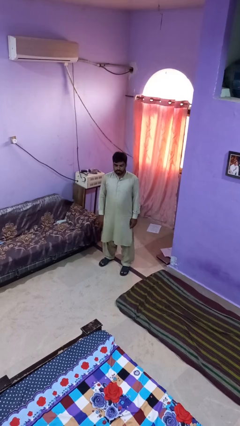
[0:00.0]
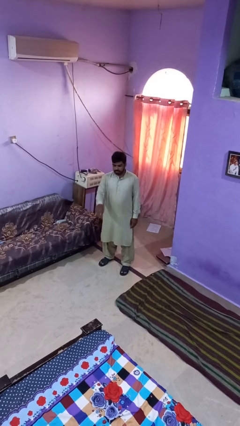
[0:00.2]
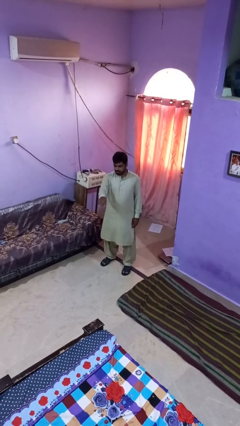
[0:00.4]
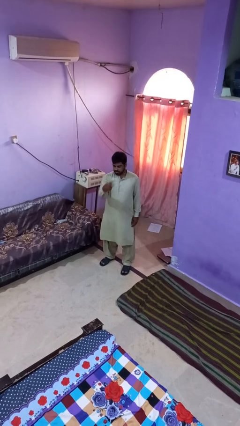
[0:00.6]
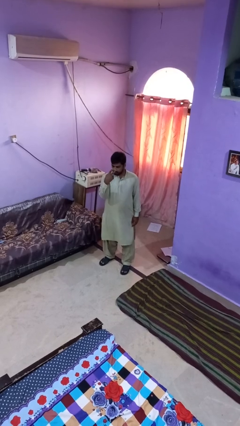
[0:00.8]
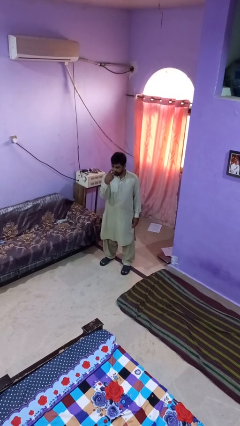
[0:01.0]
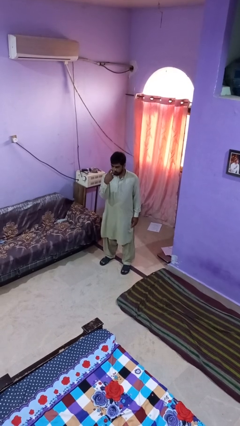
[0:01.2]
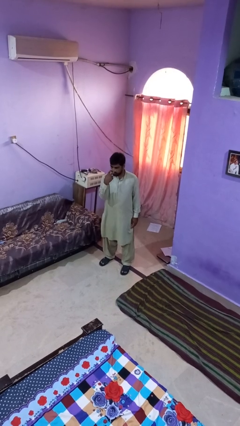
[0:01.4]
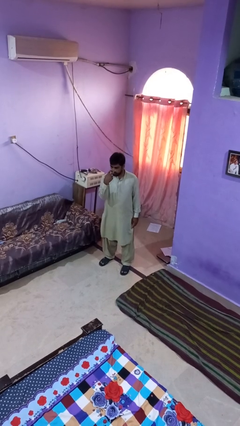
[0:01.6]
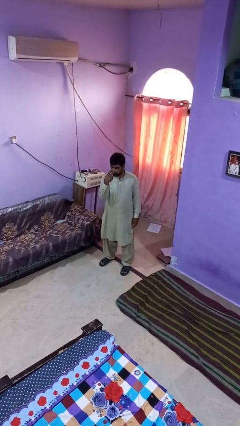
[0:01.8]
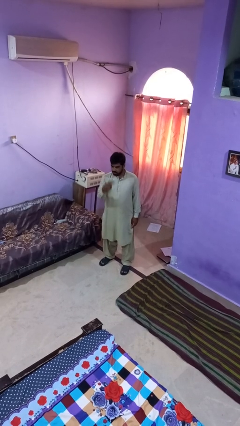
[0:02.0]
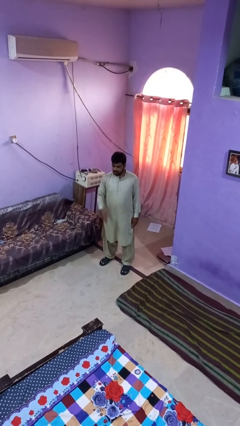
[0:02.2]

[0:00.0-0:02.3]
person gestures watch closely

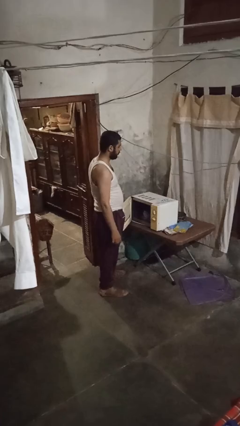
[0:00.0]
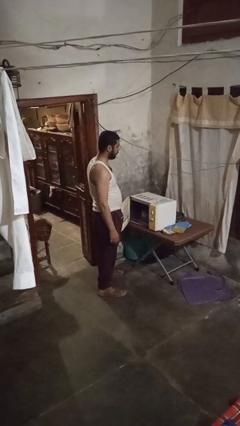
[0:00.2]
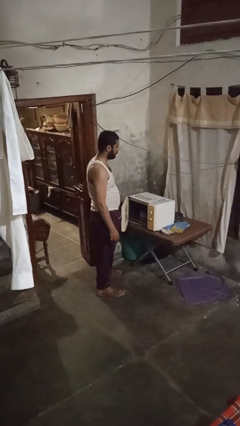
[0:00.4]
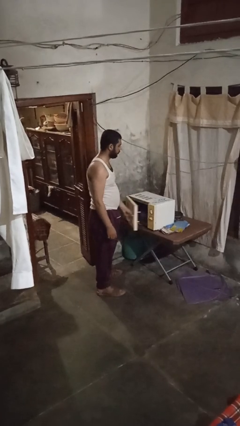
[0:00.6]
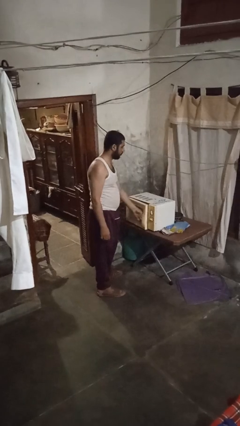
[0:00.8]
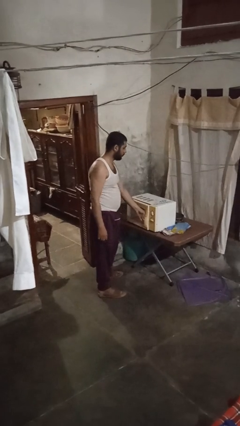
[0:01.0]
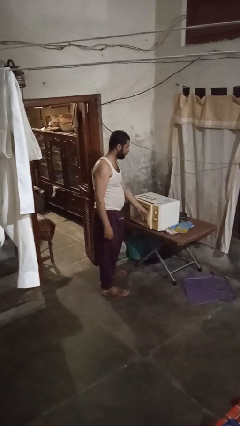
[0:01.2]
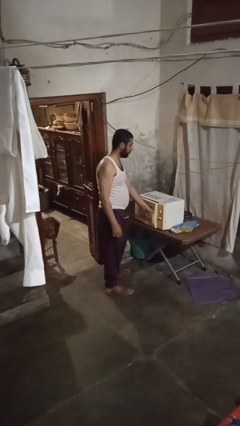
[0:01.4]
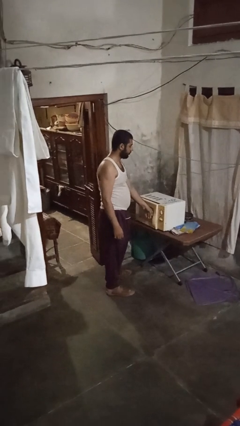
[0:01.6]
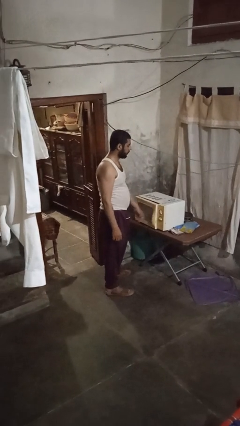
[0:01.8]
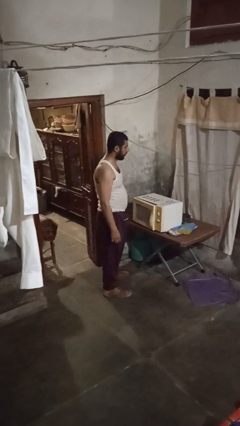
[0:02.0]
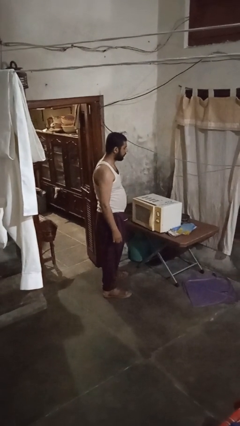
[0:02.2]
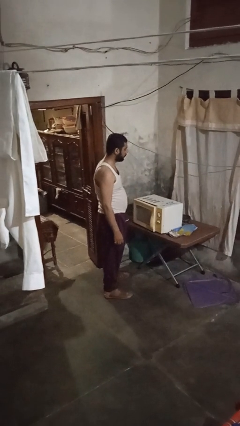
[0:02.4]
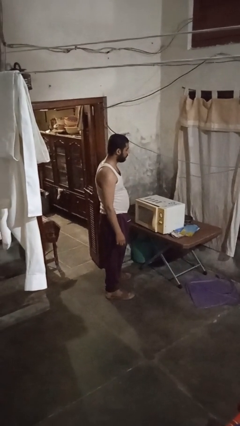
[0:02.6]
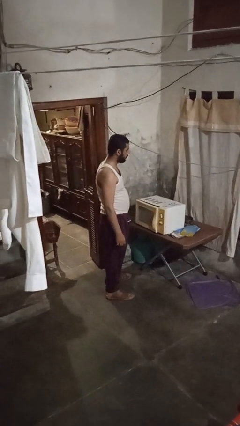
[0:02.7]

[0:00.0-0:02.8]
person closes microwave

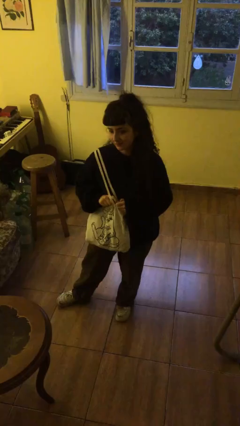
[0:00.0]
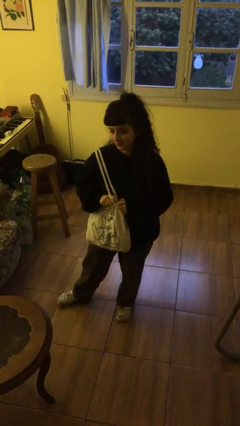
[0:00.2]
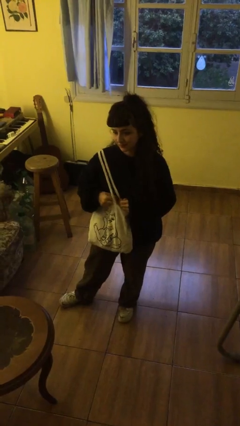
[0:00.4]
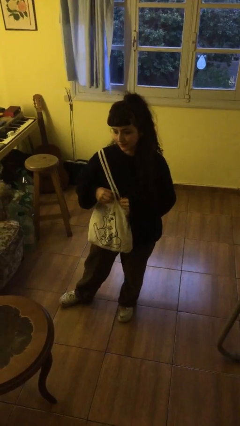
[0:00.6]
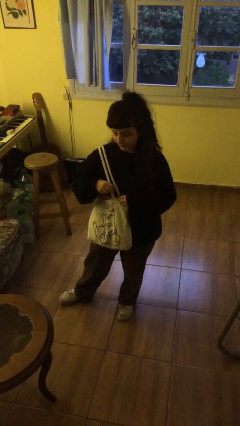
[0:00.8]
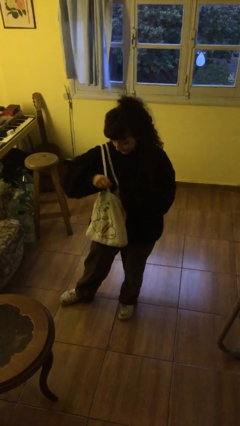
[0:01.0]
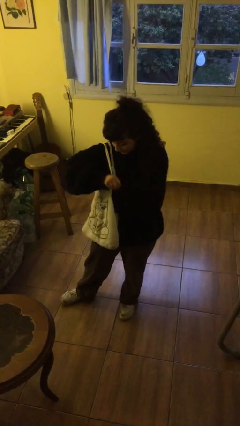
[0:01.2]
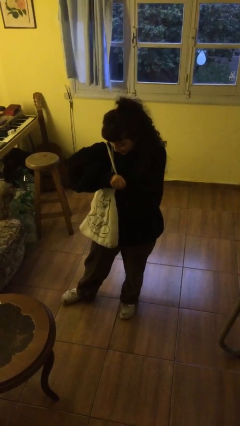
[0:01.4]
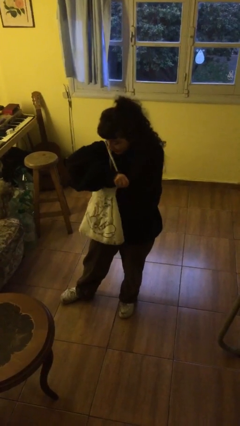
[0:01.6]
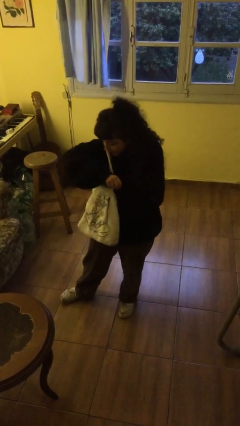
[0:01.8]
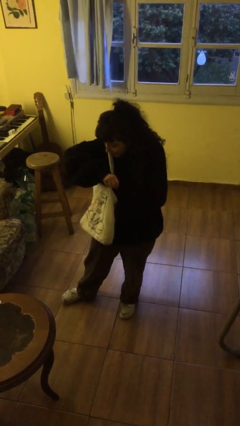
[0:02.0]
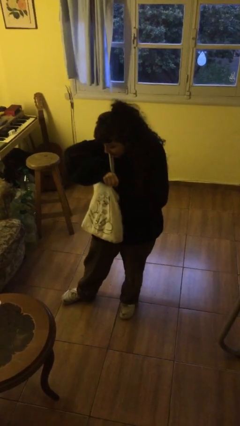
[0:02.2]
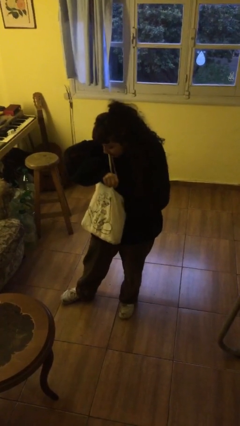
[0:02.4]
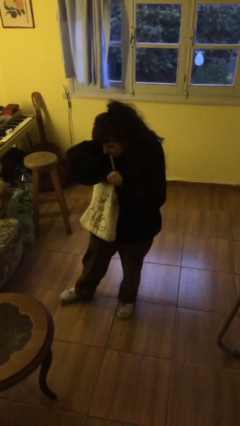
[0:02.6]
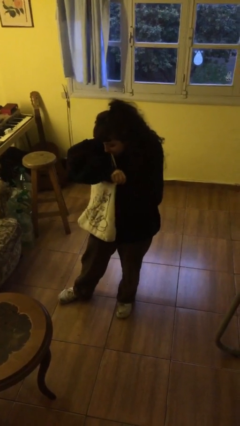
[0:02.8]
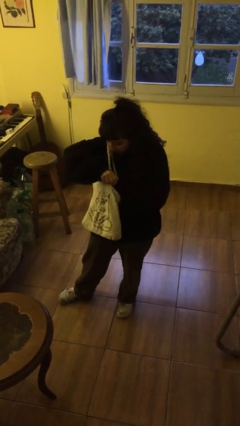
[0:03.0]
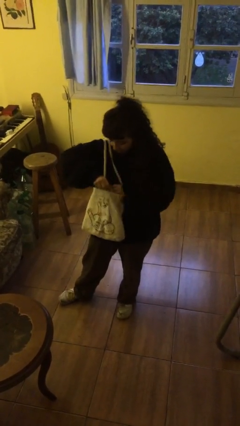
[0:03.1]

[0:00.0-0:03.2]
person searches in purse

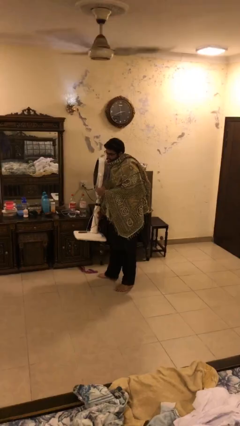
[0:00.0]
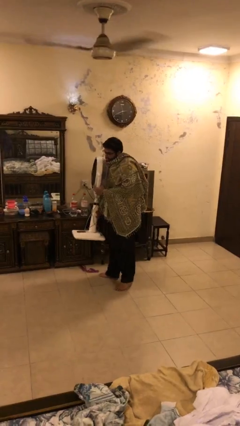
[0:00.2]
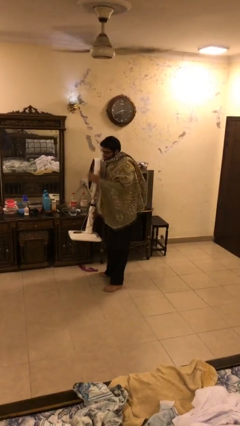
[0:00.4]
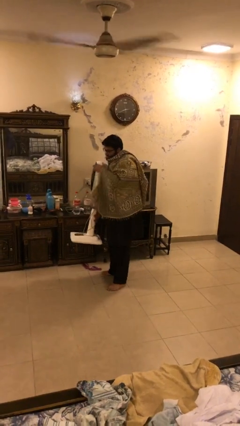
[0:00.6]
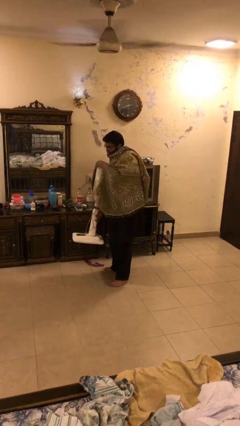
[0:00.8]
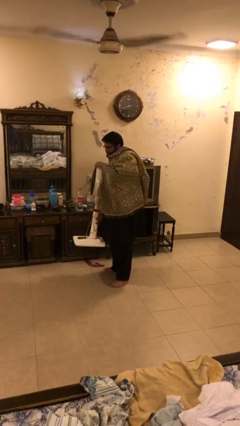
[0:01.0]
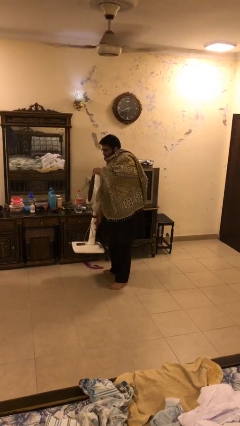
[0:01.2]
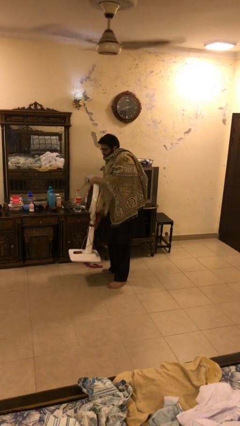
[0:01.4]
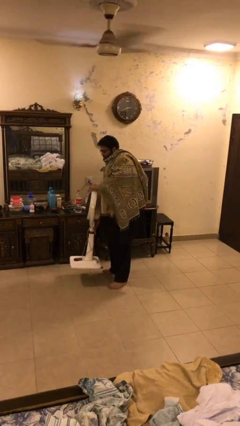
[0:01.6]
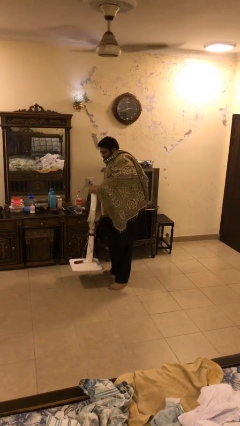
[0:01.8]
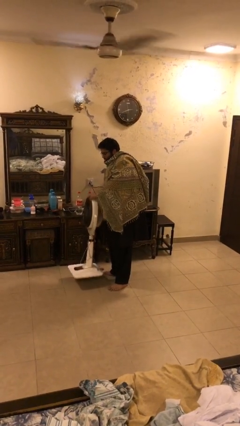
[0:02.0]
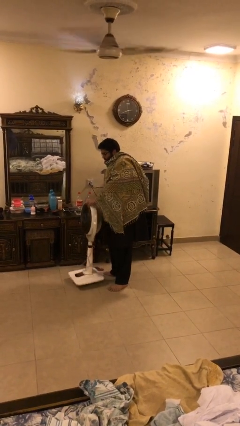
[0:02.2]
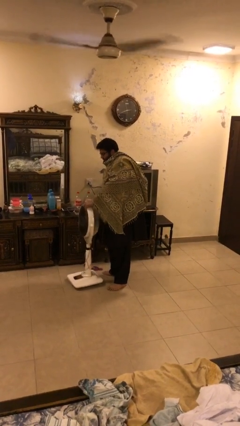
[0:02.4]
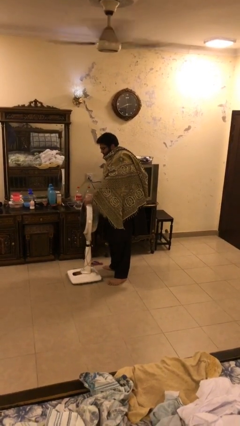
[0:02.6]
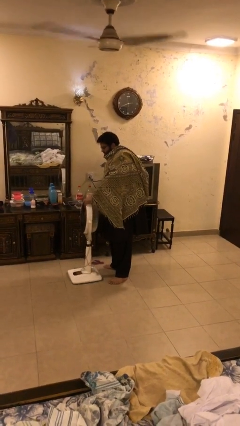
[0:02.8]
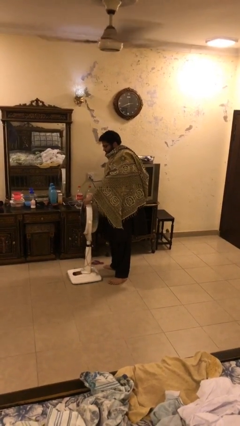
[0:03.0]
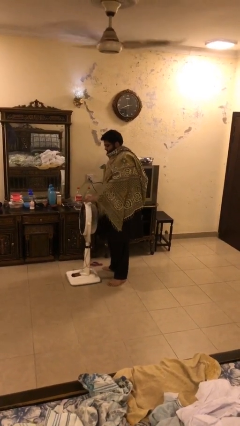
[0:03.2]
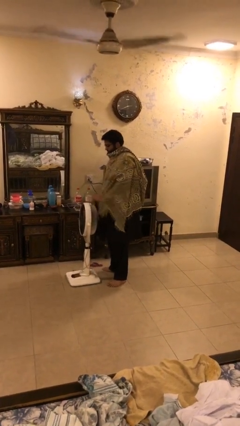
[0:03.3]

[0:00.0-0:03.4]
person puts down object on floor

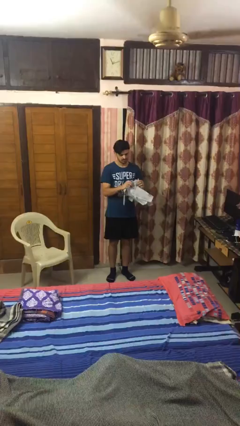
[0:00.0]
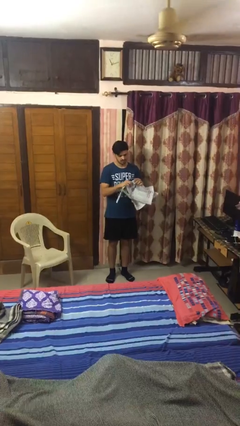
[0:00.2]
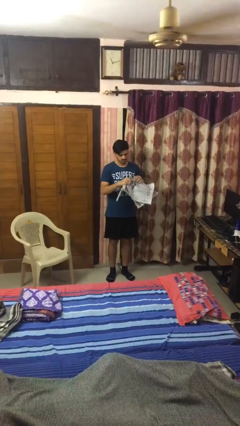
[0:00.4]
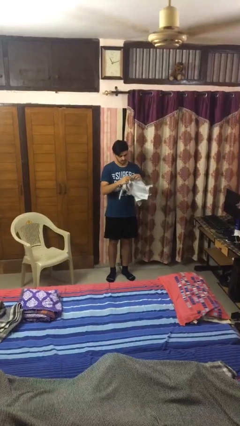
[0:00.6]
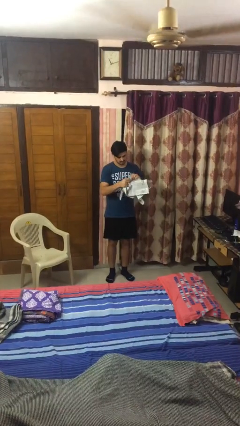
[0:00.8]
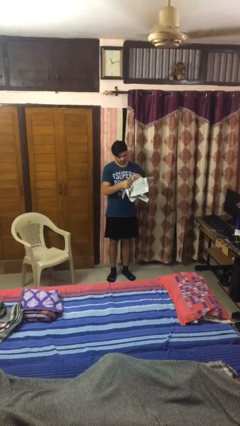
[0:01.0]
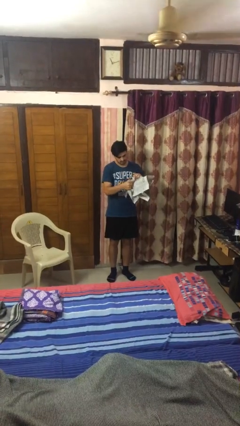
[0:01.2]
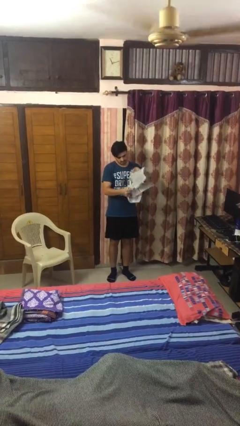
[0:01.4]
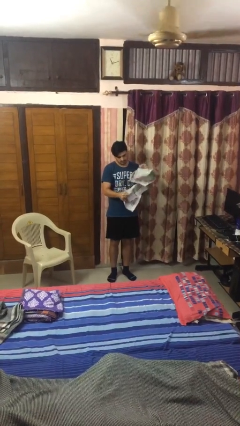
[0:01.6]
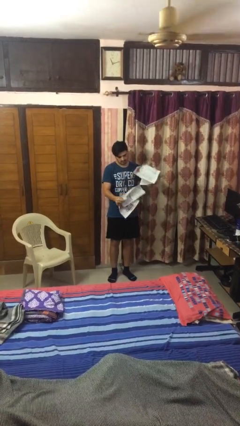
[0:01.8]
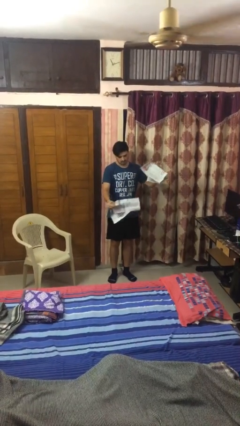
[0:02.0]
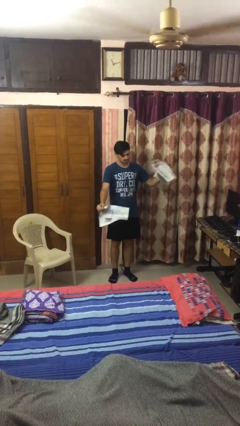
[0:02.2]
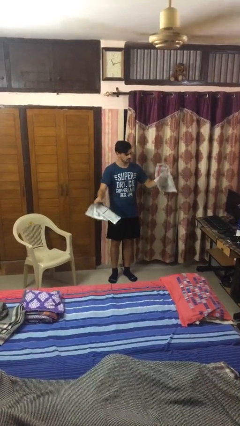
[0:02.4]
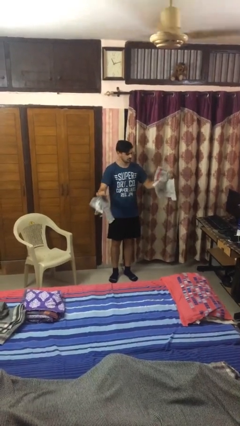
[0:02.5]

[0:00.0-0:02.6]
person tears paper

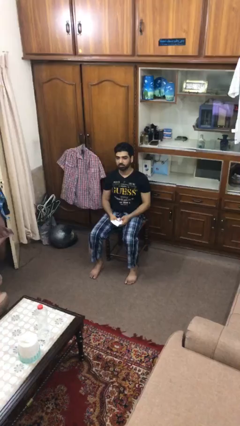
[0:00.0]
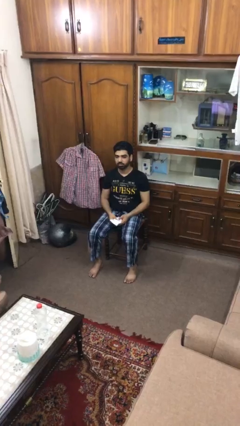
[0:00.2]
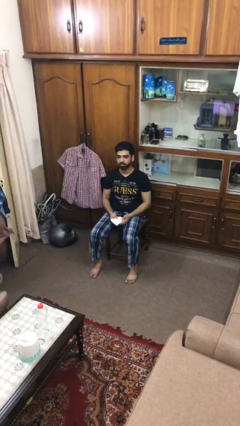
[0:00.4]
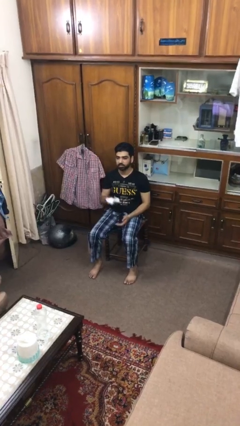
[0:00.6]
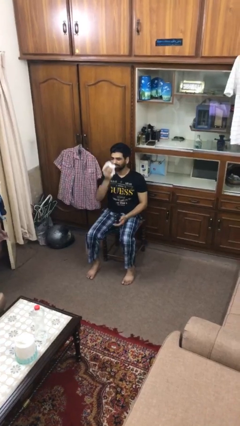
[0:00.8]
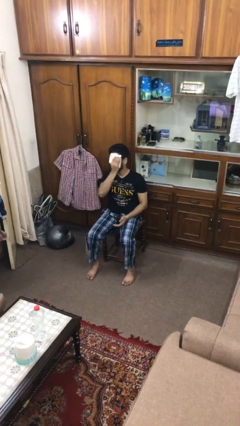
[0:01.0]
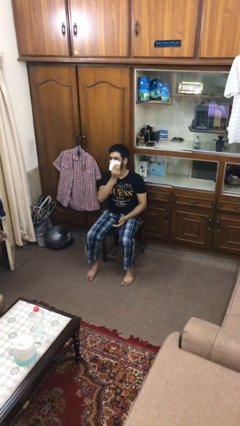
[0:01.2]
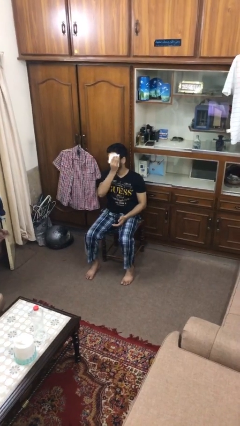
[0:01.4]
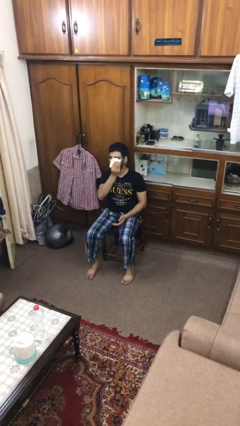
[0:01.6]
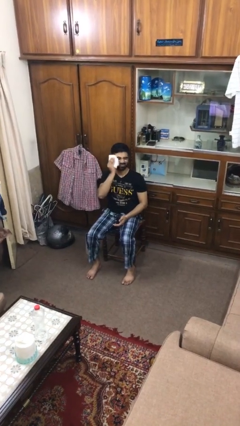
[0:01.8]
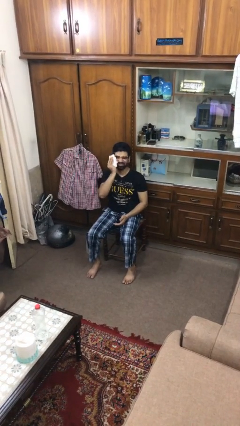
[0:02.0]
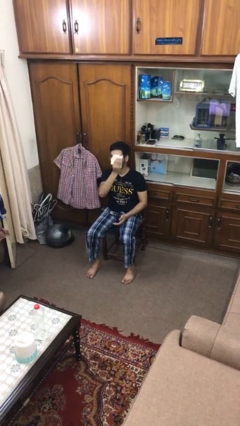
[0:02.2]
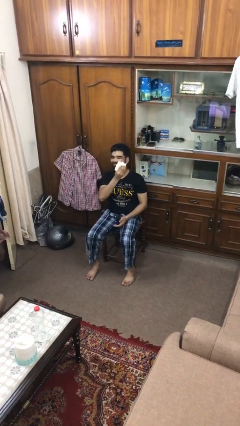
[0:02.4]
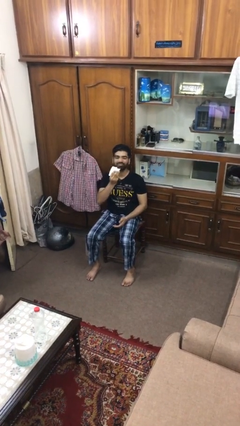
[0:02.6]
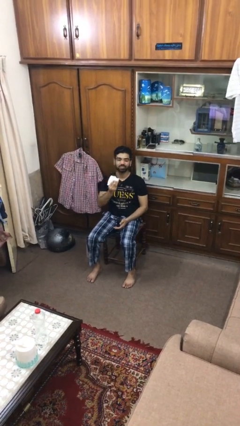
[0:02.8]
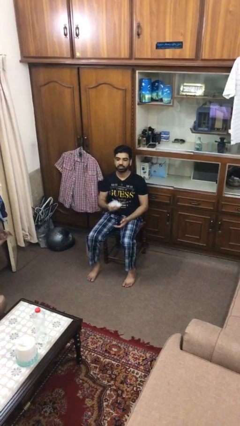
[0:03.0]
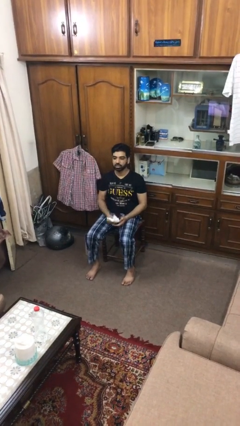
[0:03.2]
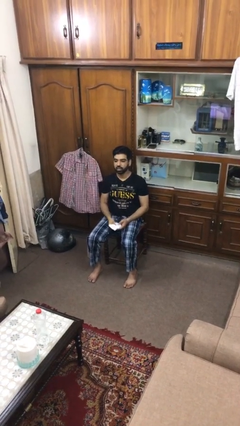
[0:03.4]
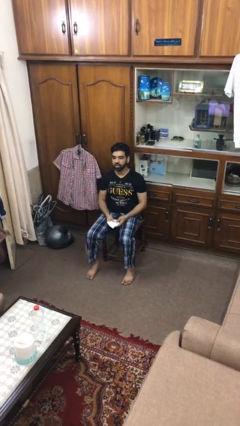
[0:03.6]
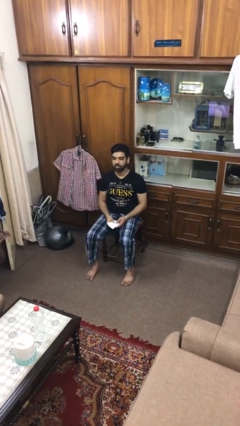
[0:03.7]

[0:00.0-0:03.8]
person wipes mouth with napkin

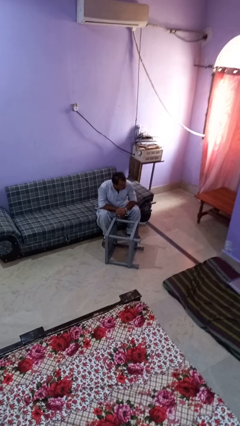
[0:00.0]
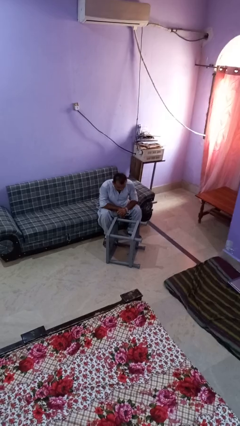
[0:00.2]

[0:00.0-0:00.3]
person knocks over furniture
